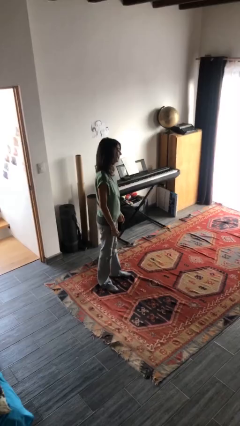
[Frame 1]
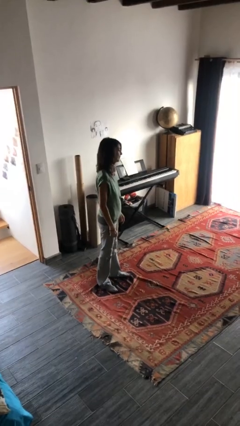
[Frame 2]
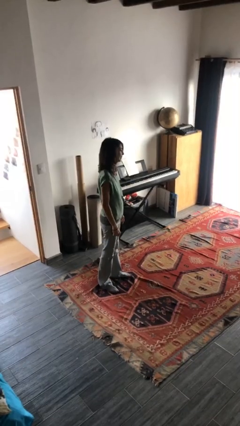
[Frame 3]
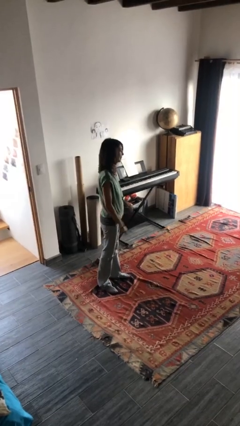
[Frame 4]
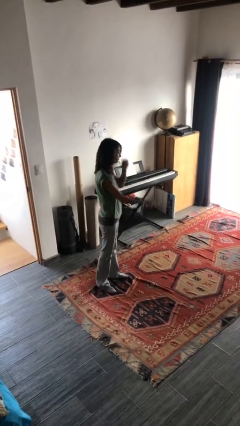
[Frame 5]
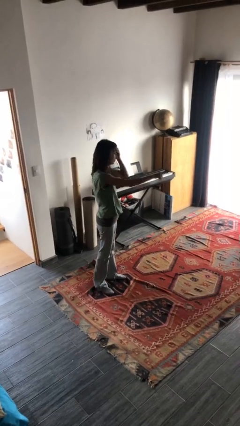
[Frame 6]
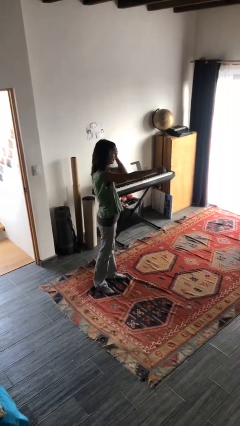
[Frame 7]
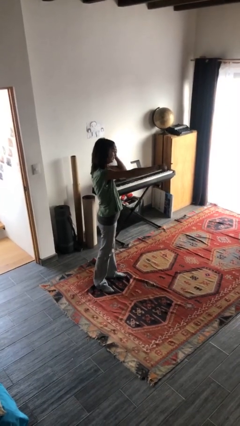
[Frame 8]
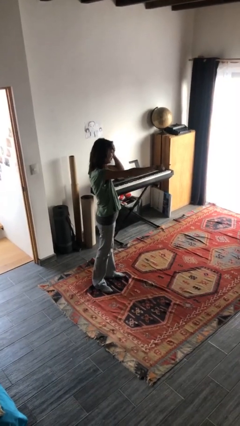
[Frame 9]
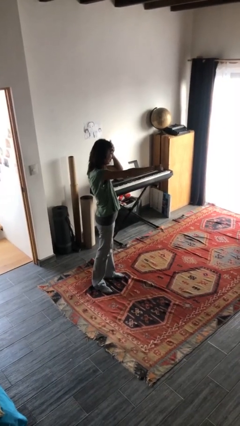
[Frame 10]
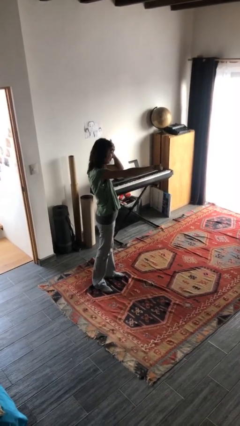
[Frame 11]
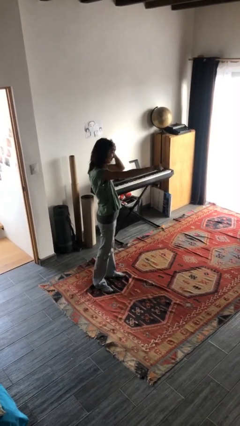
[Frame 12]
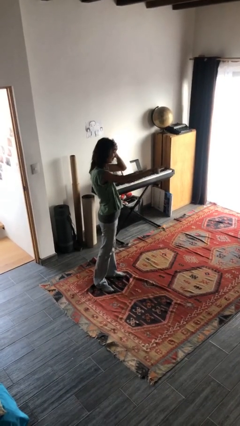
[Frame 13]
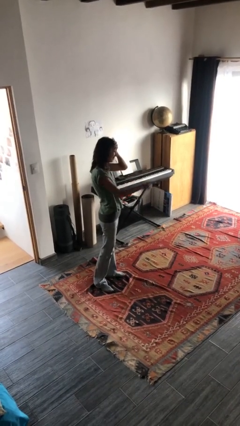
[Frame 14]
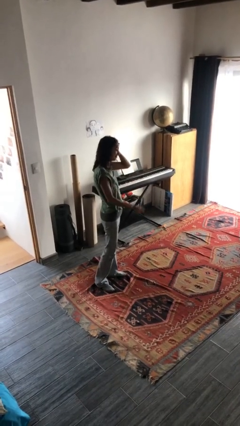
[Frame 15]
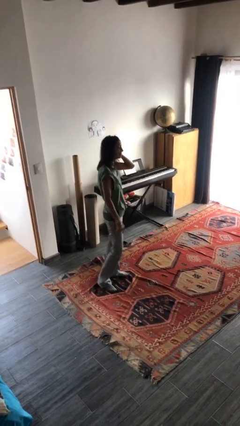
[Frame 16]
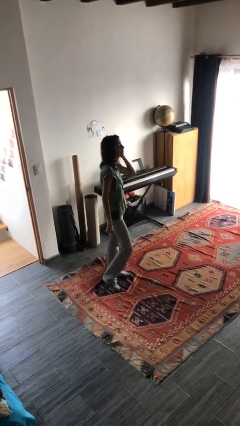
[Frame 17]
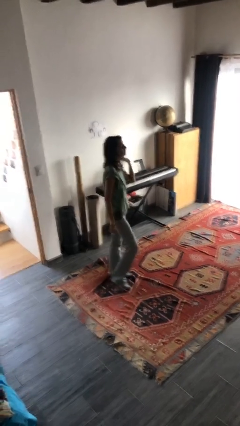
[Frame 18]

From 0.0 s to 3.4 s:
person points at person

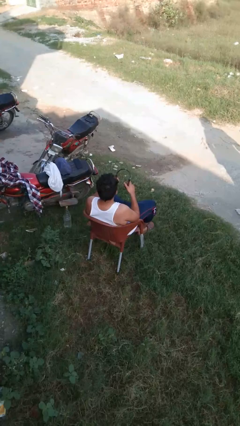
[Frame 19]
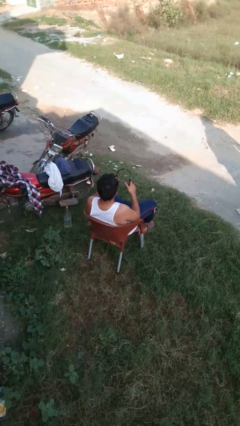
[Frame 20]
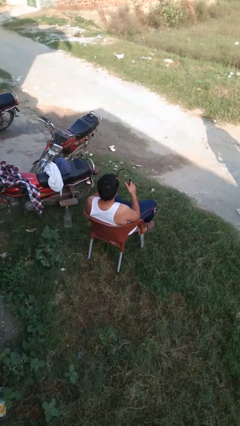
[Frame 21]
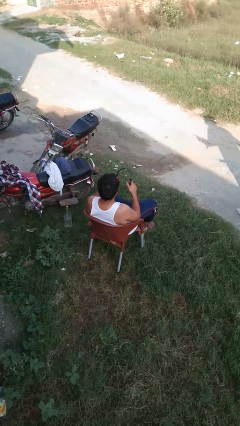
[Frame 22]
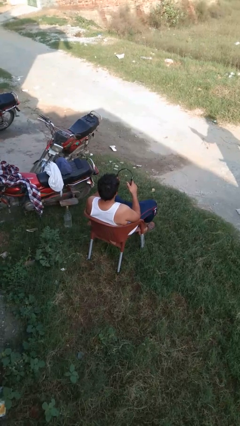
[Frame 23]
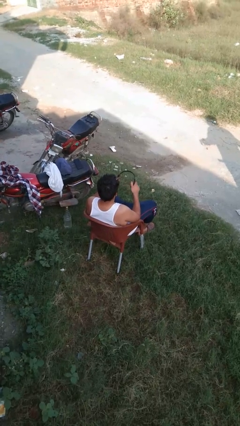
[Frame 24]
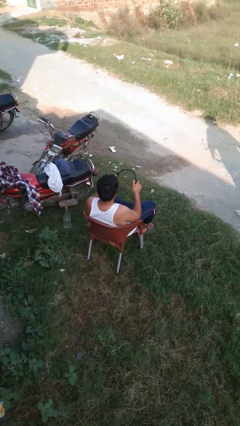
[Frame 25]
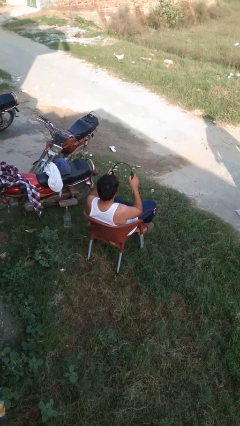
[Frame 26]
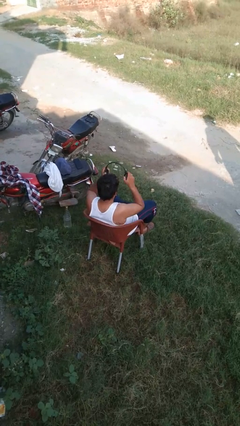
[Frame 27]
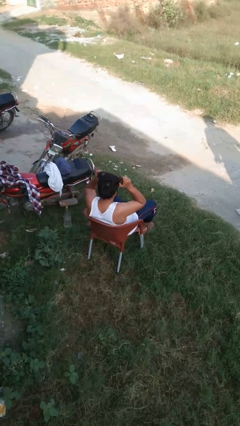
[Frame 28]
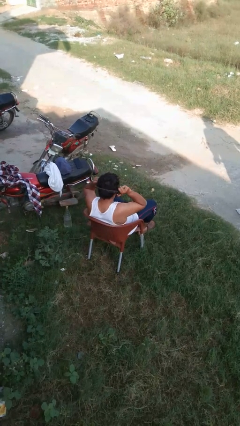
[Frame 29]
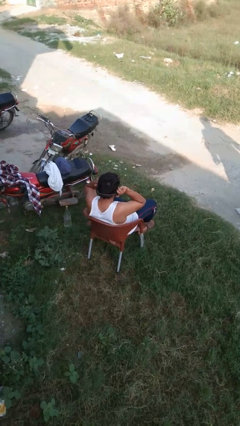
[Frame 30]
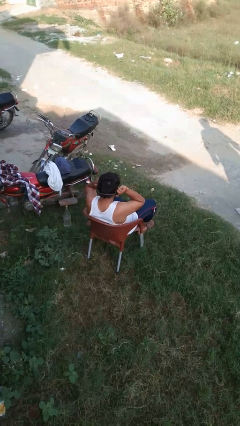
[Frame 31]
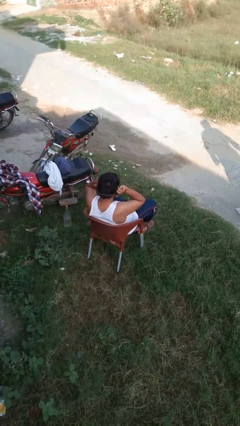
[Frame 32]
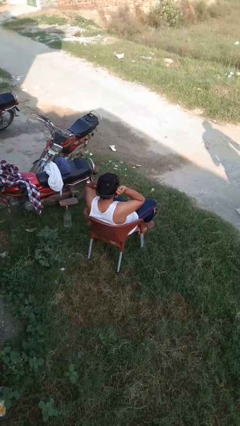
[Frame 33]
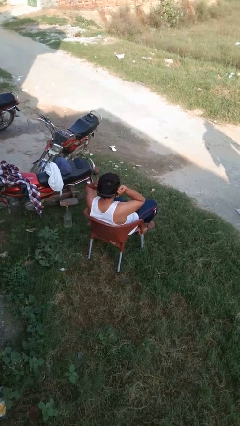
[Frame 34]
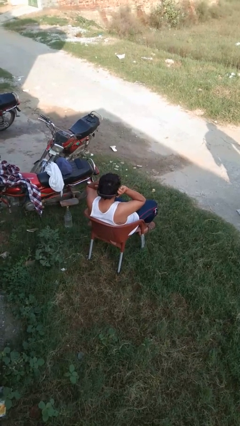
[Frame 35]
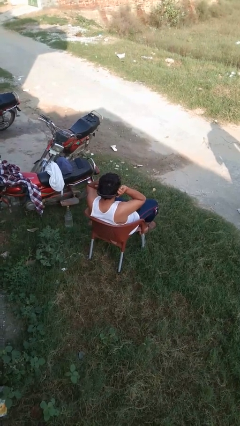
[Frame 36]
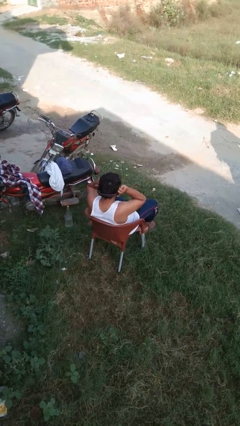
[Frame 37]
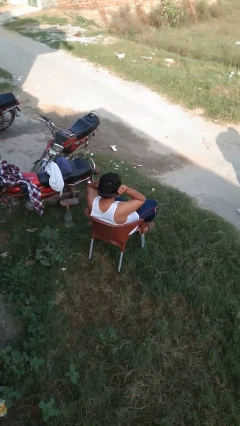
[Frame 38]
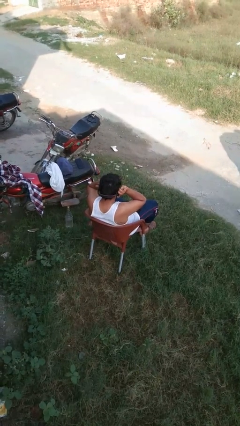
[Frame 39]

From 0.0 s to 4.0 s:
person puts on headphones

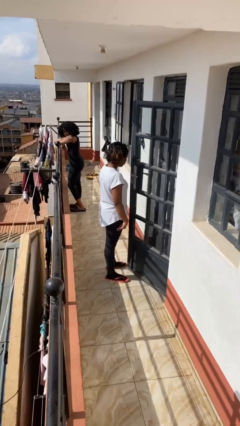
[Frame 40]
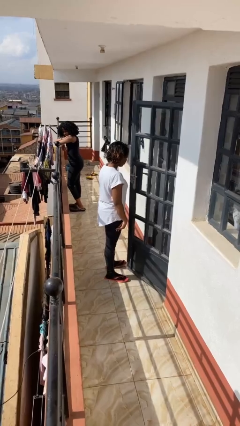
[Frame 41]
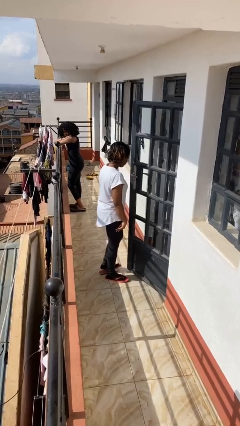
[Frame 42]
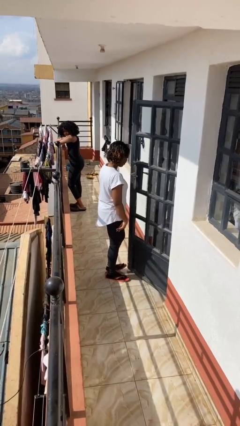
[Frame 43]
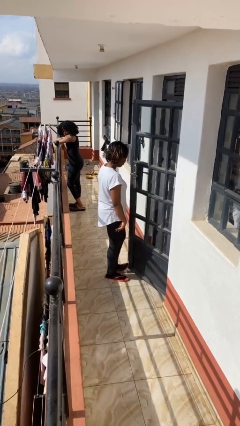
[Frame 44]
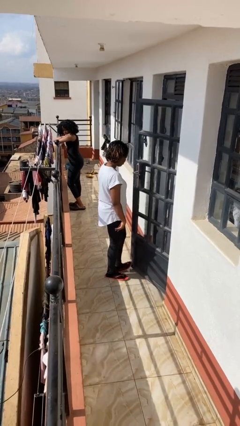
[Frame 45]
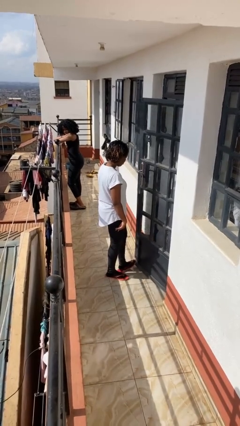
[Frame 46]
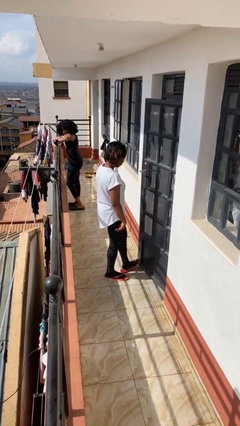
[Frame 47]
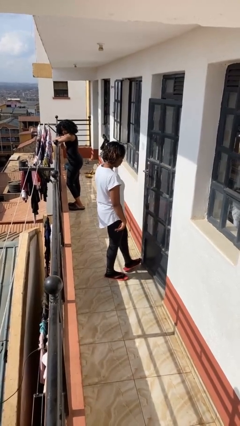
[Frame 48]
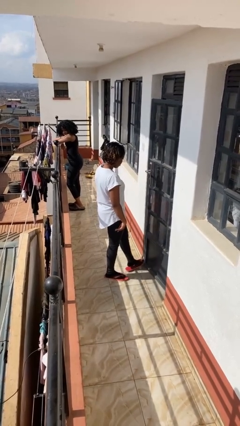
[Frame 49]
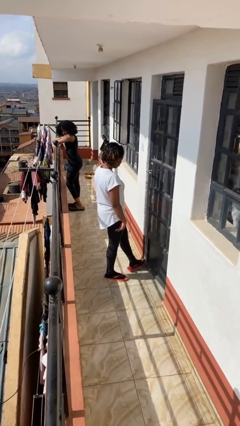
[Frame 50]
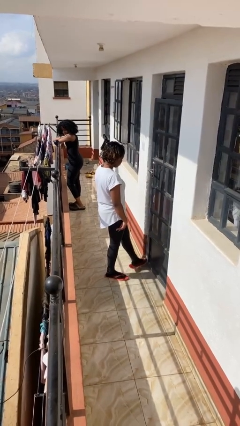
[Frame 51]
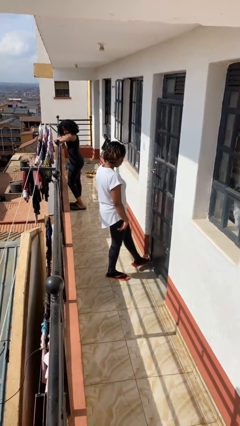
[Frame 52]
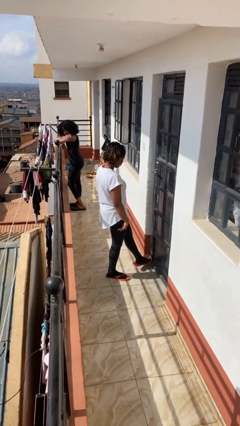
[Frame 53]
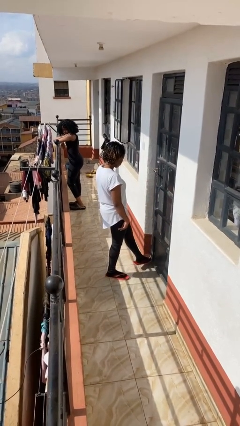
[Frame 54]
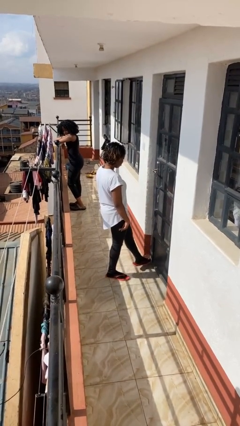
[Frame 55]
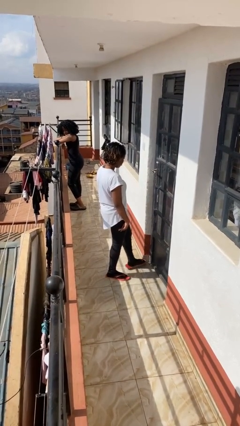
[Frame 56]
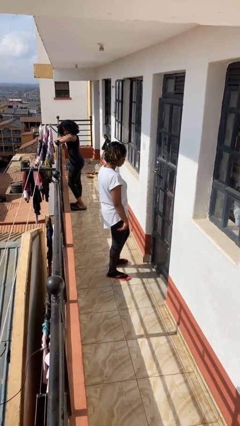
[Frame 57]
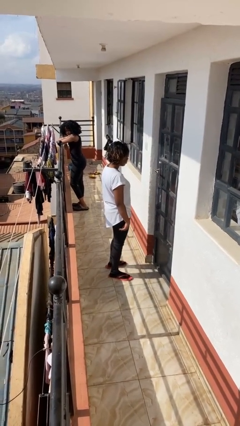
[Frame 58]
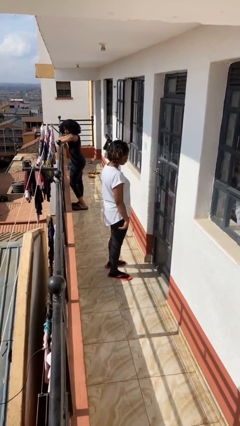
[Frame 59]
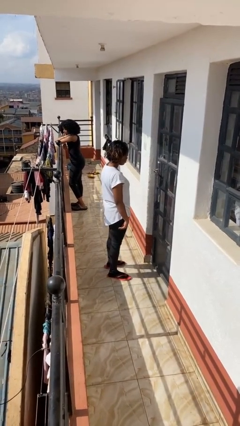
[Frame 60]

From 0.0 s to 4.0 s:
person closes door with foot

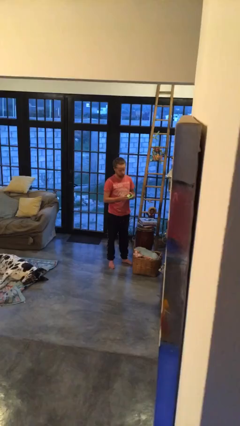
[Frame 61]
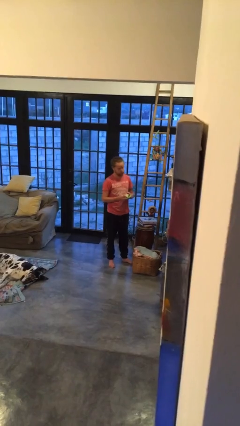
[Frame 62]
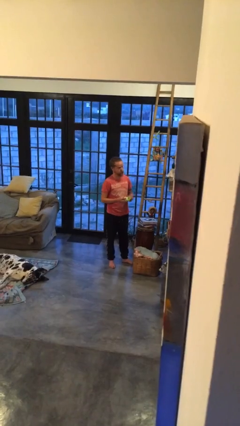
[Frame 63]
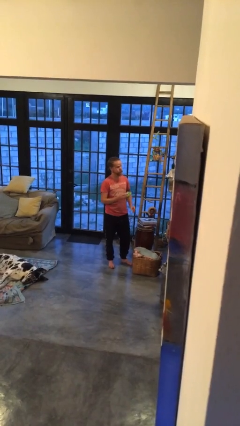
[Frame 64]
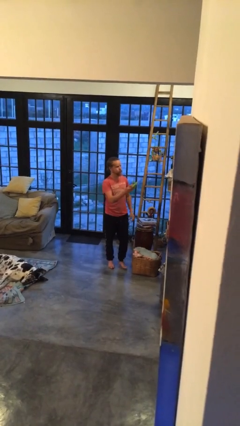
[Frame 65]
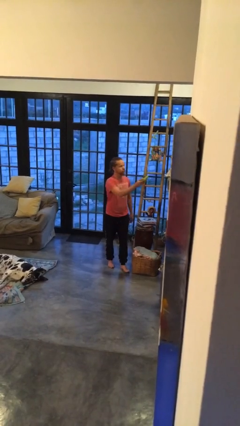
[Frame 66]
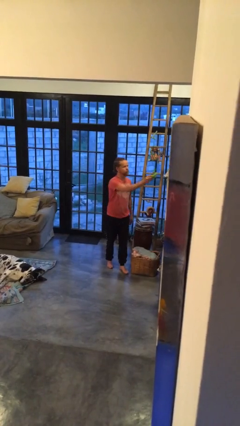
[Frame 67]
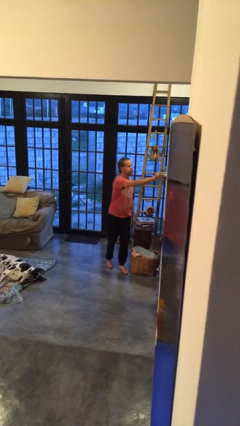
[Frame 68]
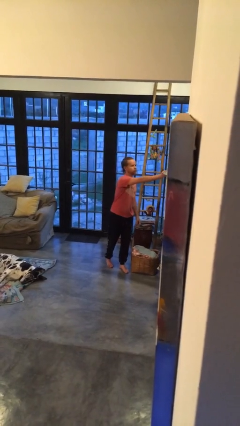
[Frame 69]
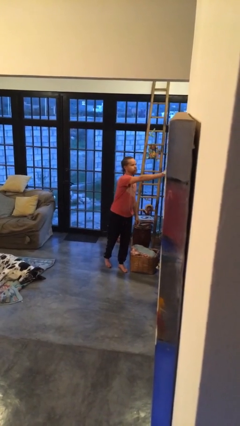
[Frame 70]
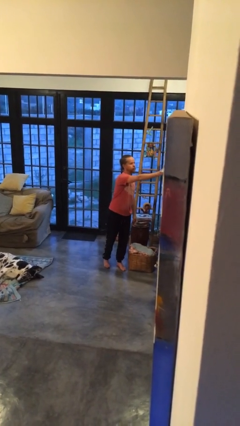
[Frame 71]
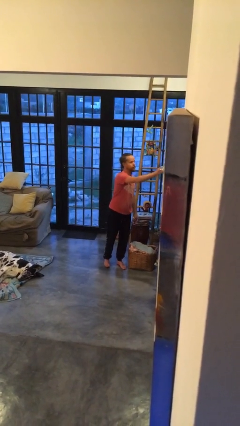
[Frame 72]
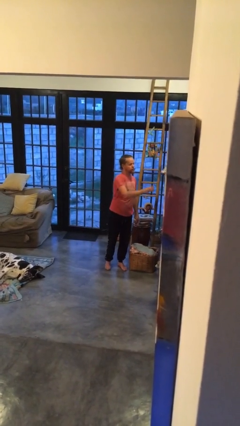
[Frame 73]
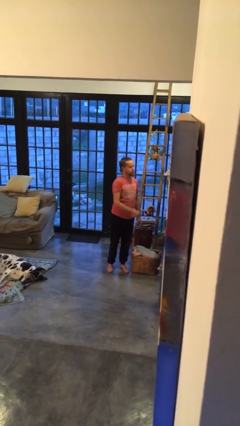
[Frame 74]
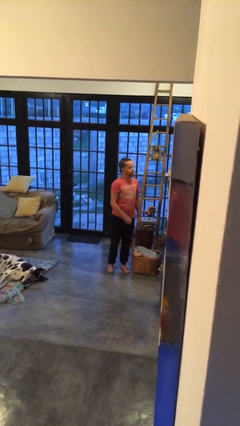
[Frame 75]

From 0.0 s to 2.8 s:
person puts down object on countertop

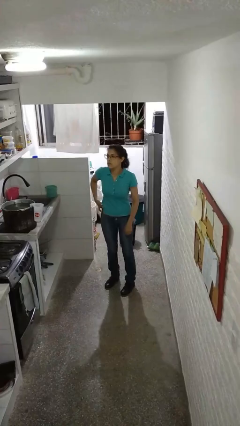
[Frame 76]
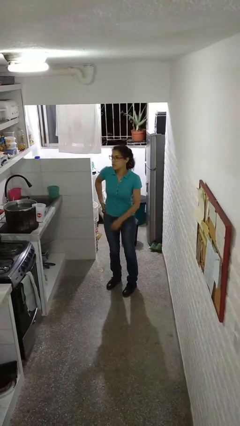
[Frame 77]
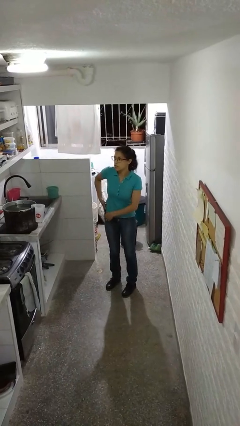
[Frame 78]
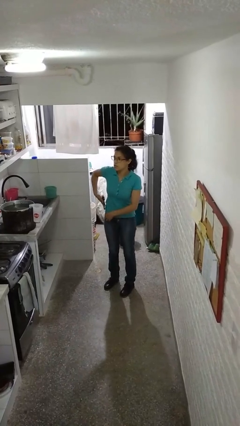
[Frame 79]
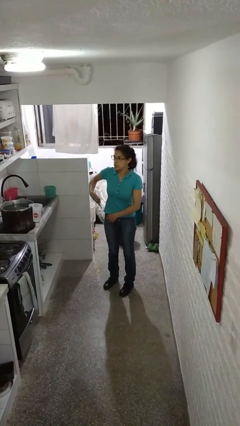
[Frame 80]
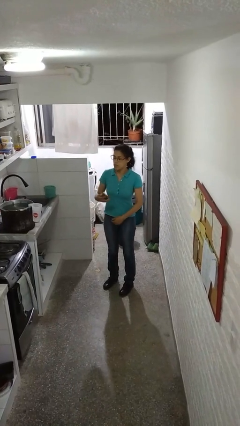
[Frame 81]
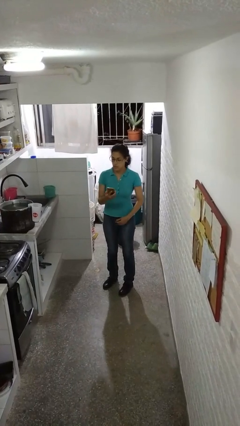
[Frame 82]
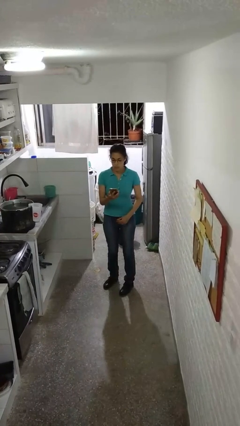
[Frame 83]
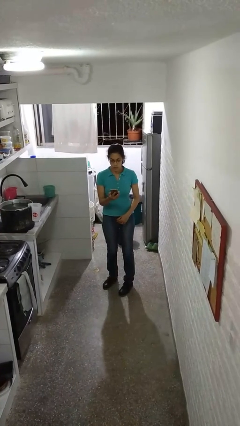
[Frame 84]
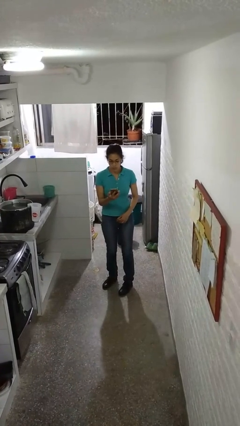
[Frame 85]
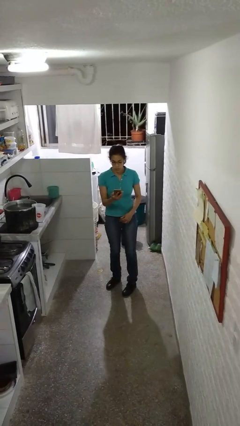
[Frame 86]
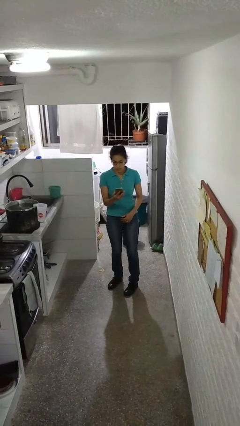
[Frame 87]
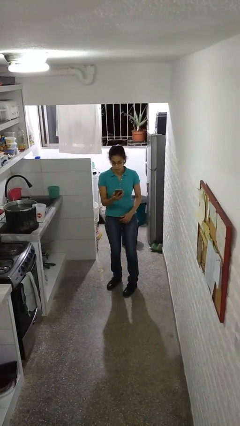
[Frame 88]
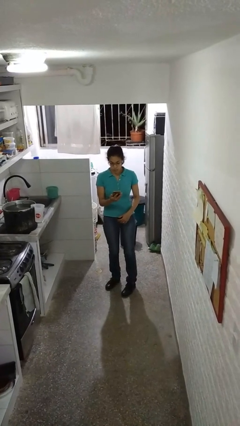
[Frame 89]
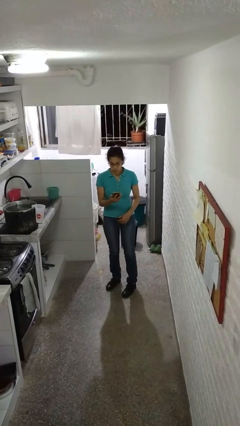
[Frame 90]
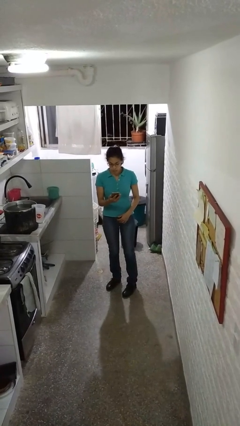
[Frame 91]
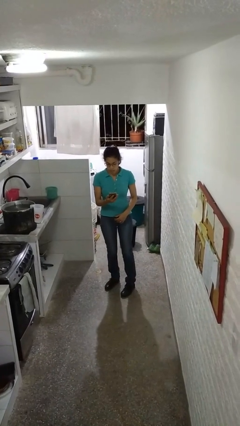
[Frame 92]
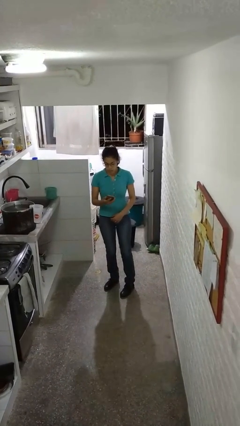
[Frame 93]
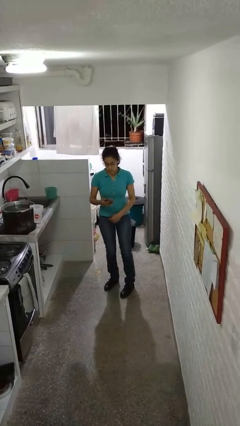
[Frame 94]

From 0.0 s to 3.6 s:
person takes phone from pocket
